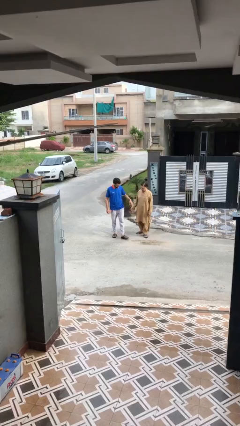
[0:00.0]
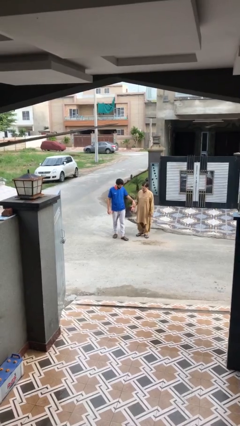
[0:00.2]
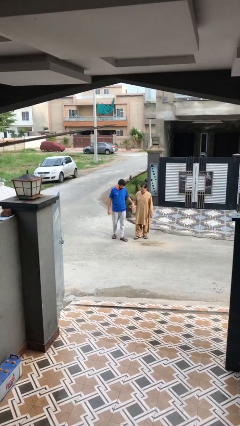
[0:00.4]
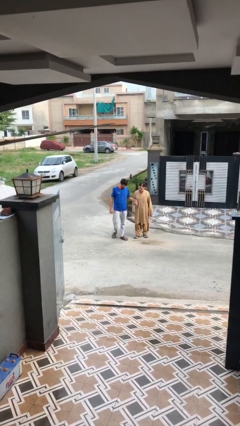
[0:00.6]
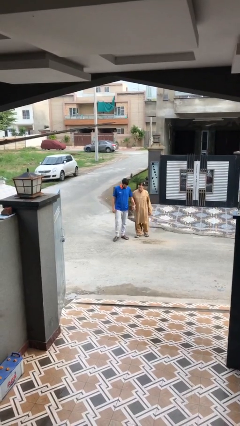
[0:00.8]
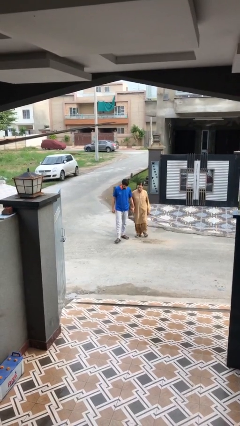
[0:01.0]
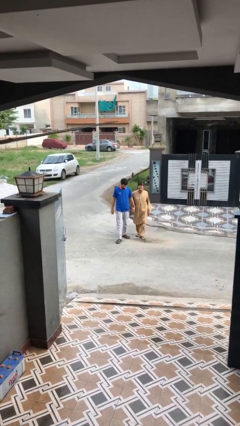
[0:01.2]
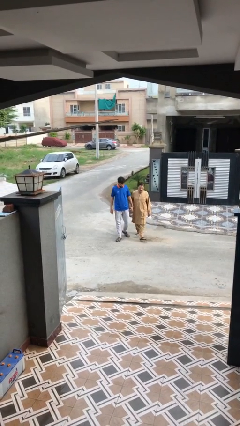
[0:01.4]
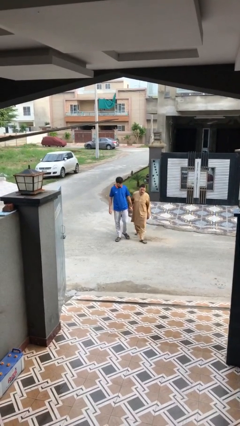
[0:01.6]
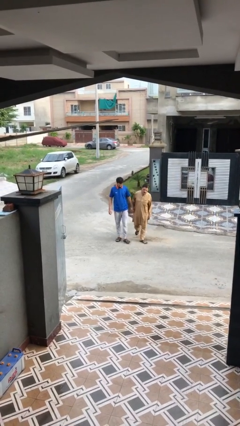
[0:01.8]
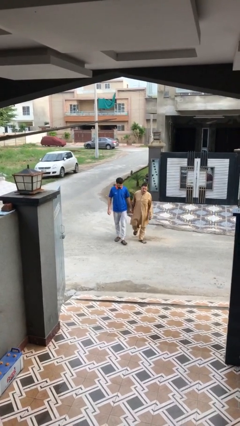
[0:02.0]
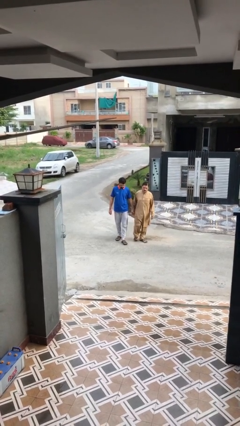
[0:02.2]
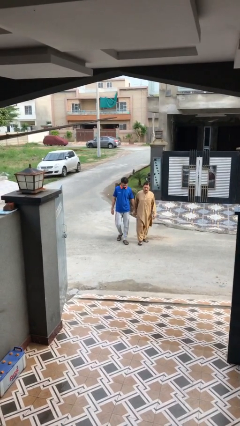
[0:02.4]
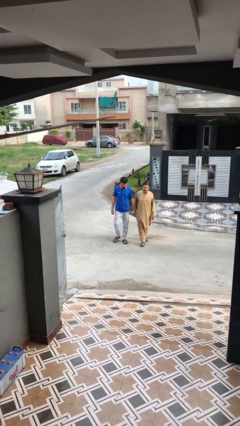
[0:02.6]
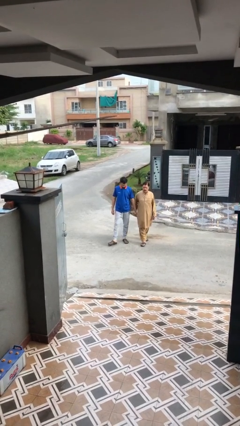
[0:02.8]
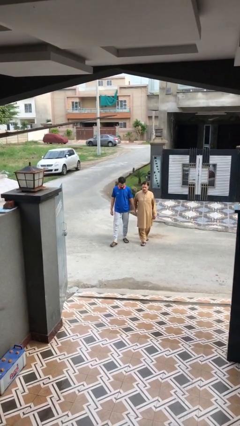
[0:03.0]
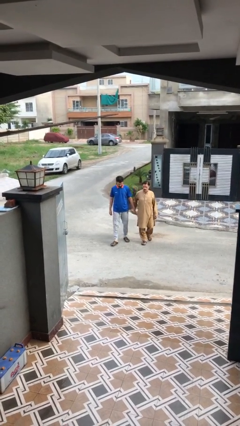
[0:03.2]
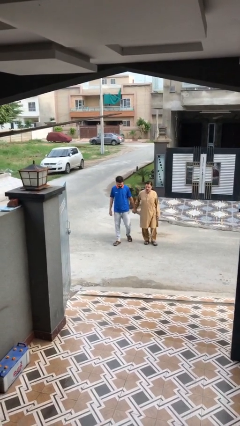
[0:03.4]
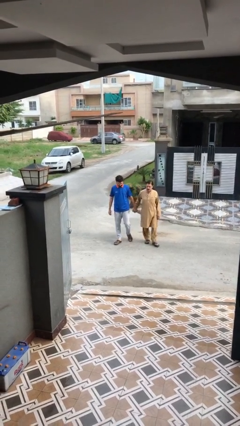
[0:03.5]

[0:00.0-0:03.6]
person holds hand

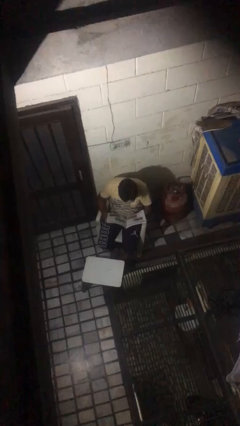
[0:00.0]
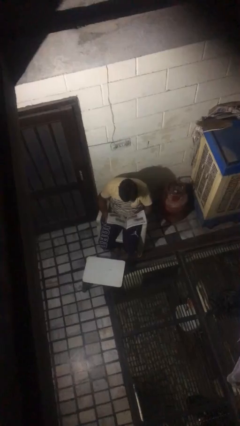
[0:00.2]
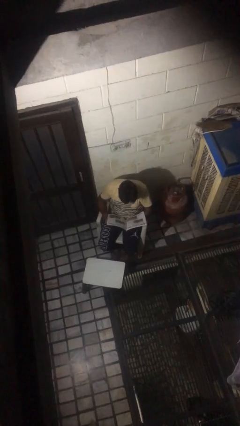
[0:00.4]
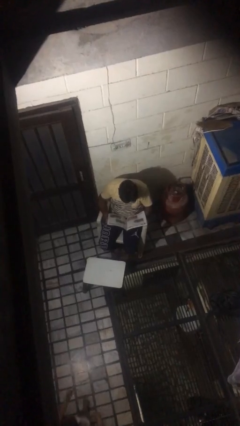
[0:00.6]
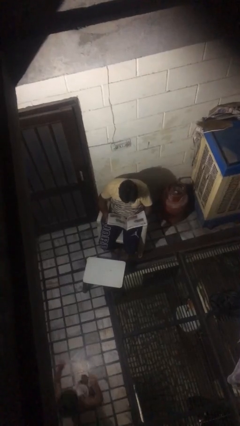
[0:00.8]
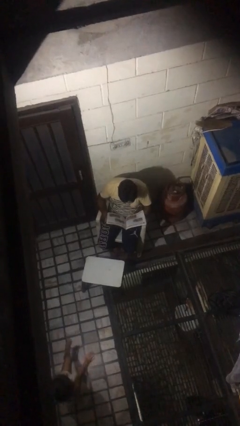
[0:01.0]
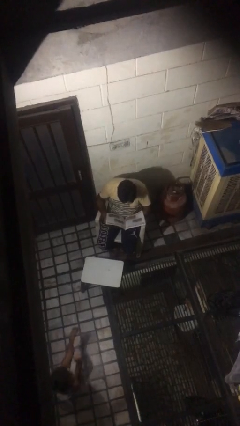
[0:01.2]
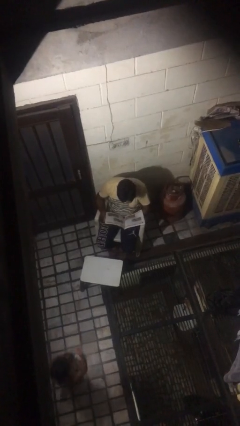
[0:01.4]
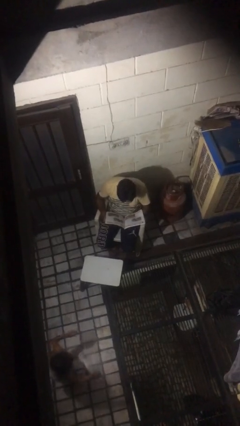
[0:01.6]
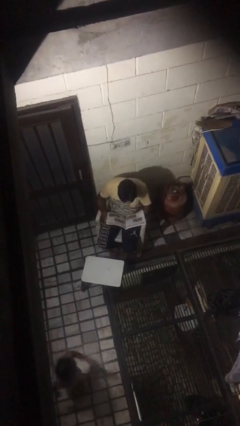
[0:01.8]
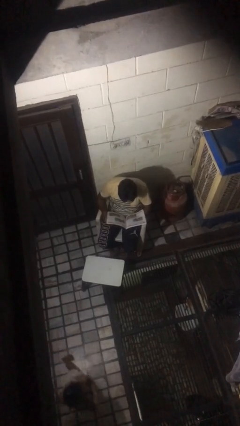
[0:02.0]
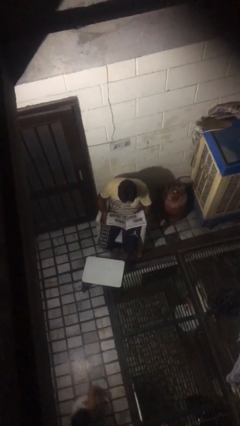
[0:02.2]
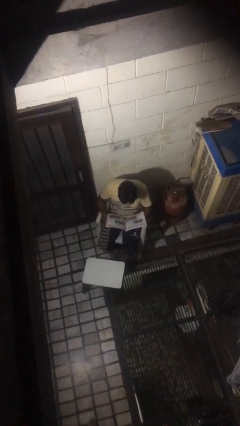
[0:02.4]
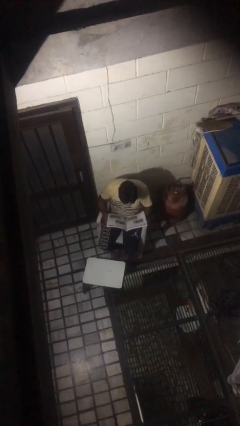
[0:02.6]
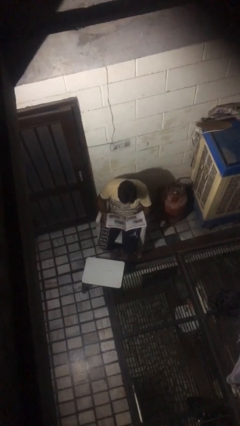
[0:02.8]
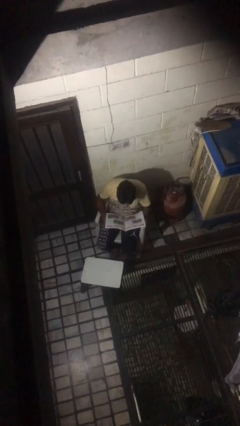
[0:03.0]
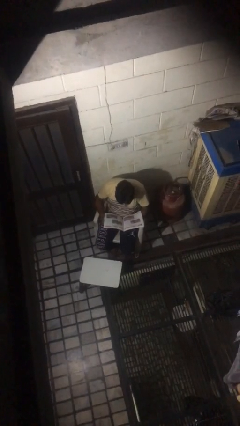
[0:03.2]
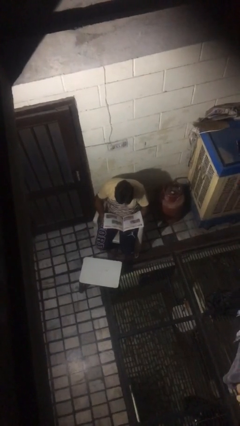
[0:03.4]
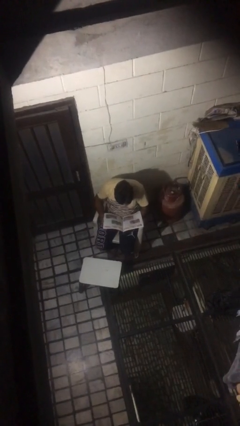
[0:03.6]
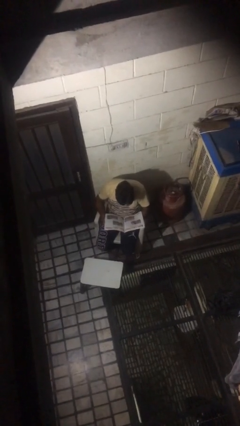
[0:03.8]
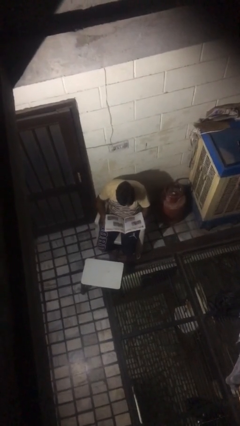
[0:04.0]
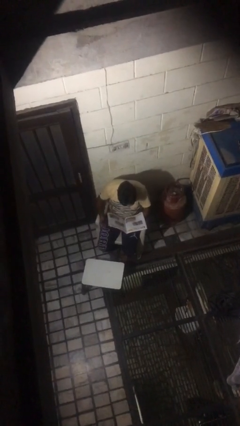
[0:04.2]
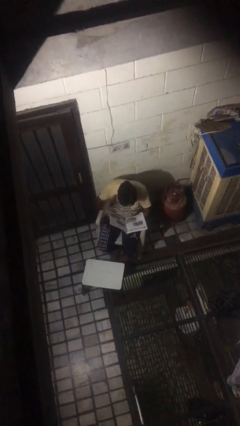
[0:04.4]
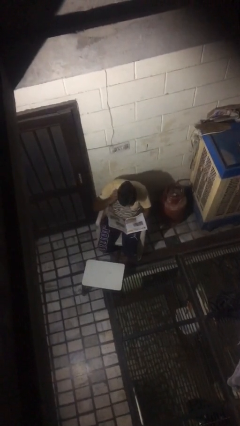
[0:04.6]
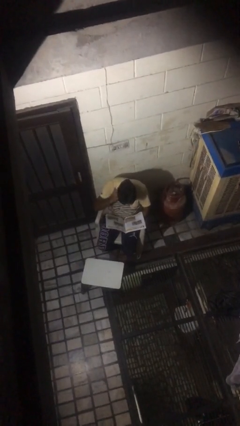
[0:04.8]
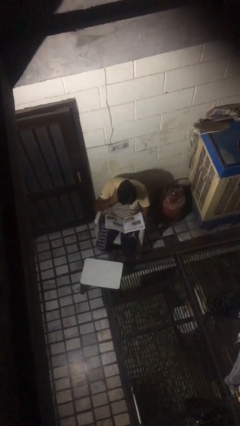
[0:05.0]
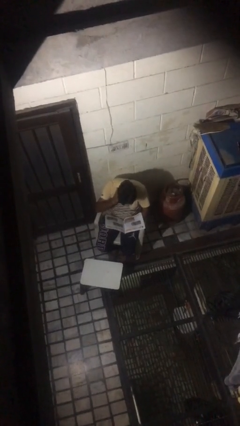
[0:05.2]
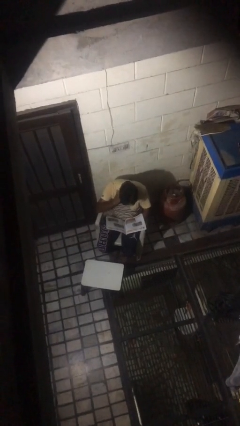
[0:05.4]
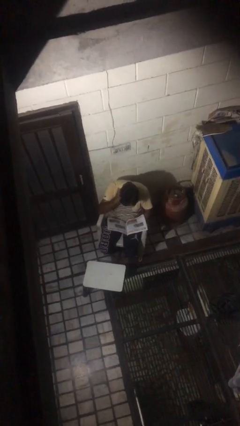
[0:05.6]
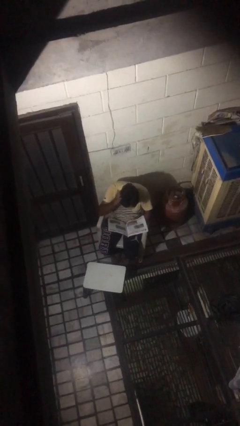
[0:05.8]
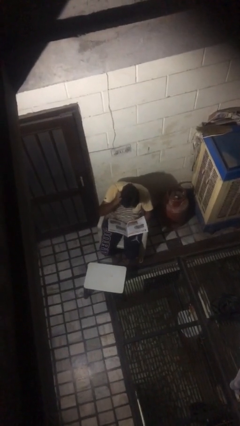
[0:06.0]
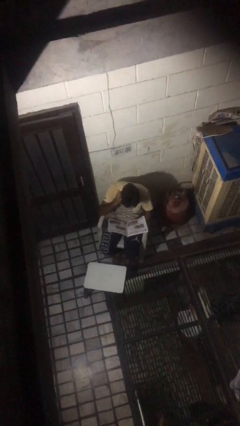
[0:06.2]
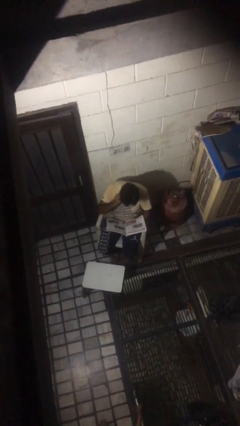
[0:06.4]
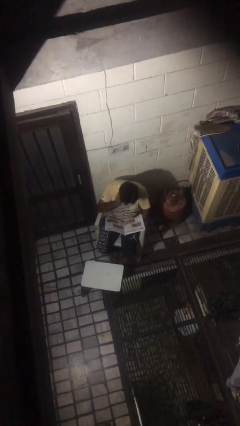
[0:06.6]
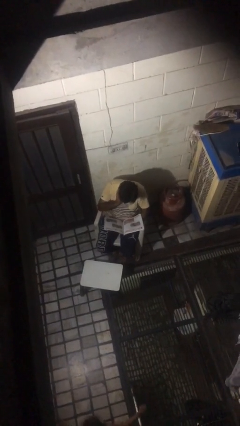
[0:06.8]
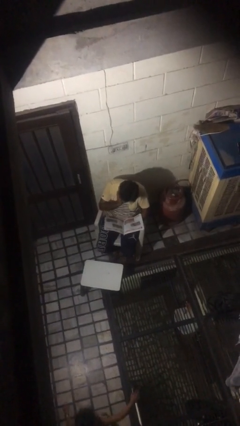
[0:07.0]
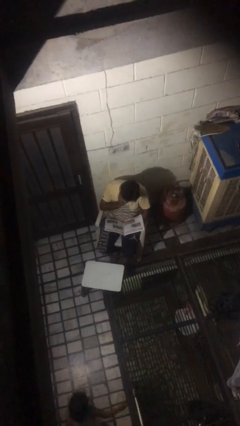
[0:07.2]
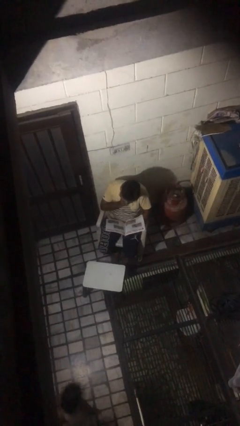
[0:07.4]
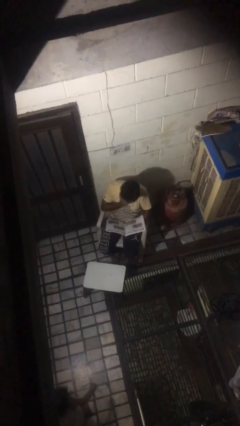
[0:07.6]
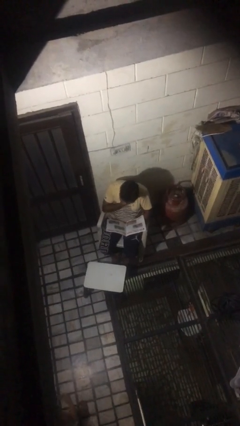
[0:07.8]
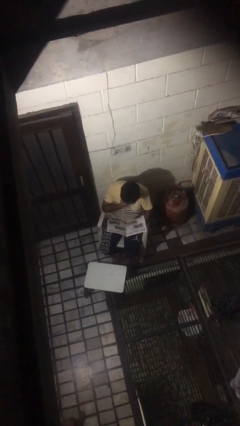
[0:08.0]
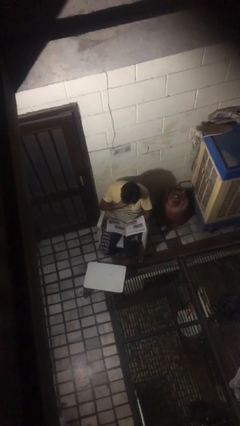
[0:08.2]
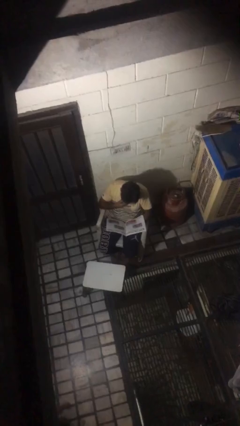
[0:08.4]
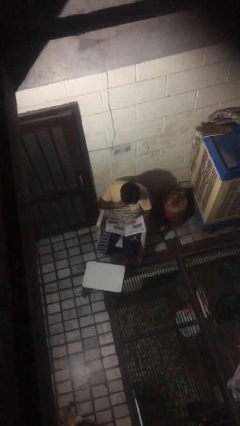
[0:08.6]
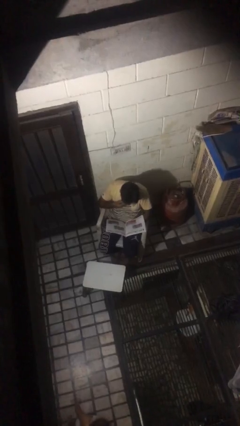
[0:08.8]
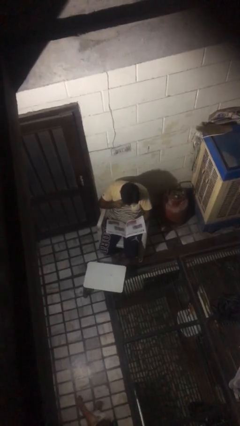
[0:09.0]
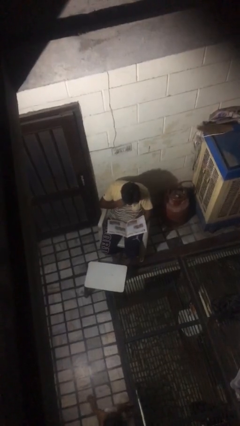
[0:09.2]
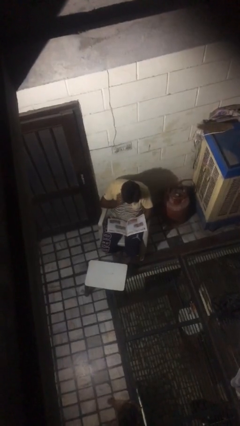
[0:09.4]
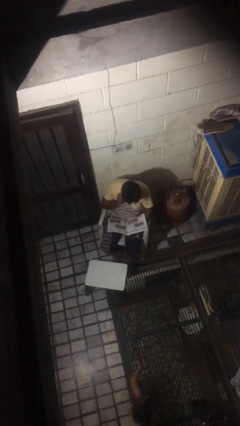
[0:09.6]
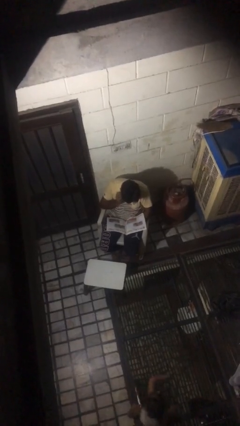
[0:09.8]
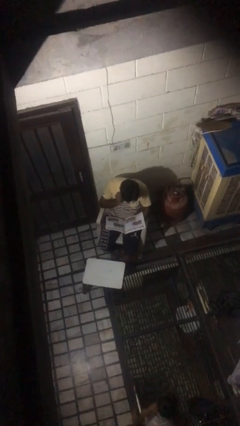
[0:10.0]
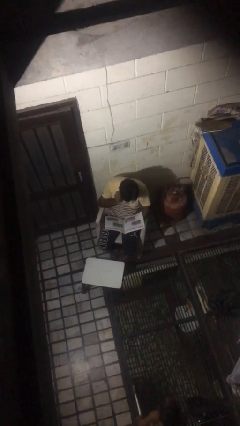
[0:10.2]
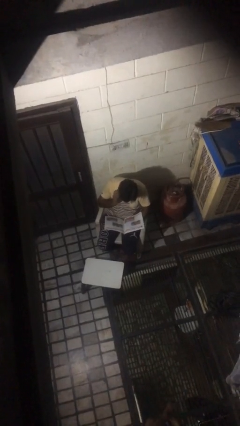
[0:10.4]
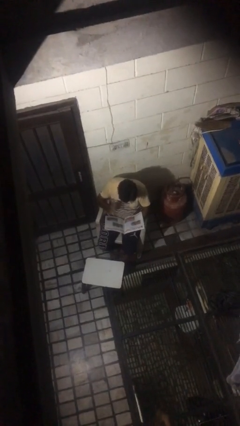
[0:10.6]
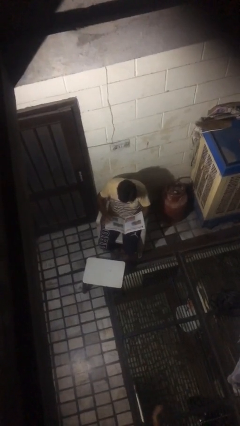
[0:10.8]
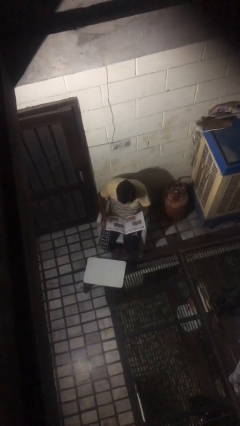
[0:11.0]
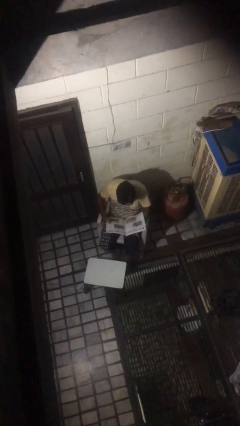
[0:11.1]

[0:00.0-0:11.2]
person reads document

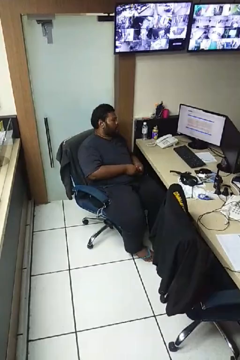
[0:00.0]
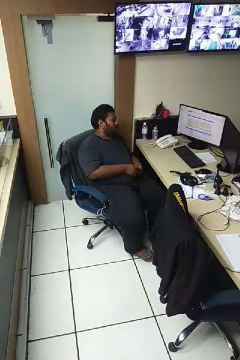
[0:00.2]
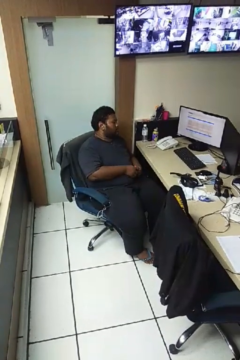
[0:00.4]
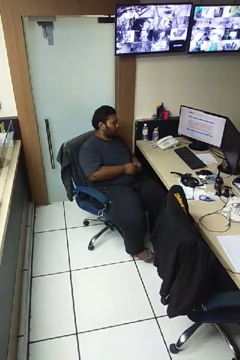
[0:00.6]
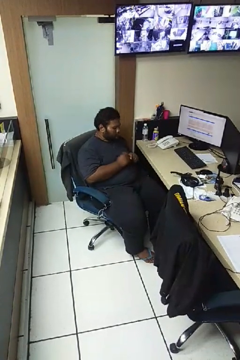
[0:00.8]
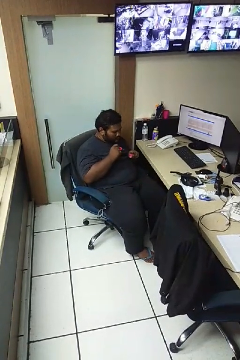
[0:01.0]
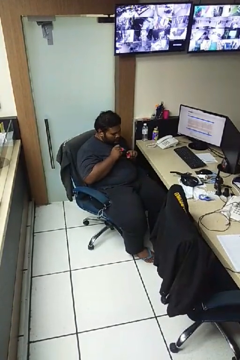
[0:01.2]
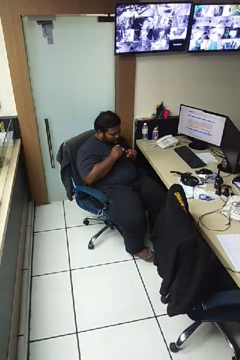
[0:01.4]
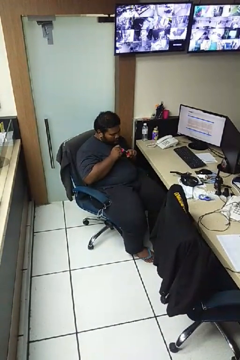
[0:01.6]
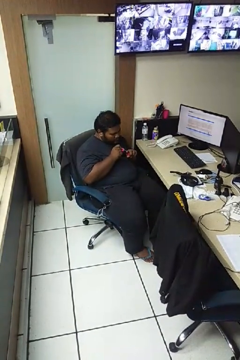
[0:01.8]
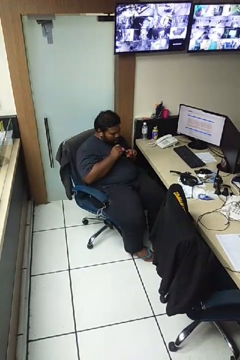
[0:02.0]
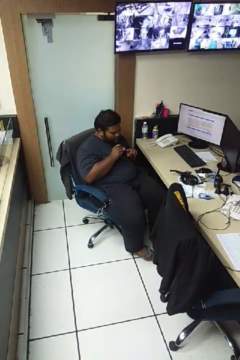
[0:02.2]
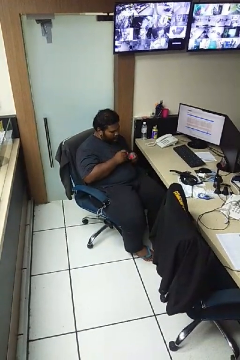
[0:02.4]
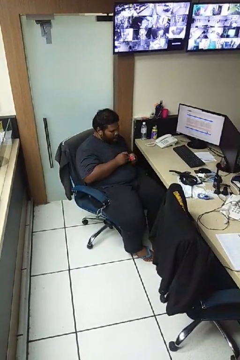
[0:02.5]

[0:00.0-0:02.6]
person paints fingernails

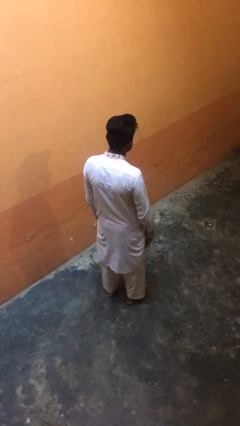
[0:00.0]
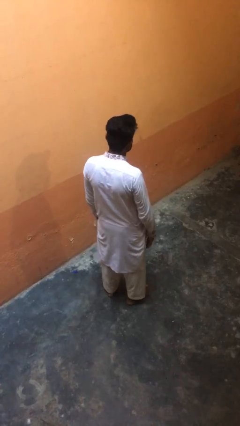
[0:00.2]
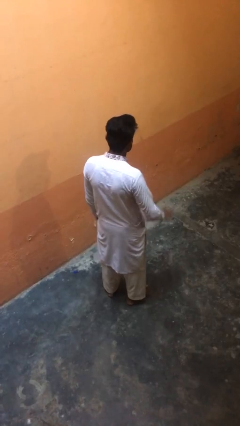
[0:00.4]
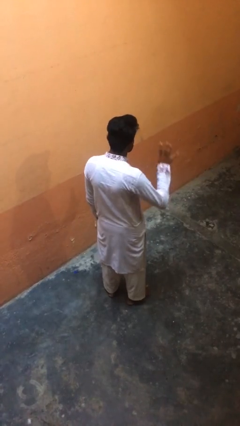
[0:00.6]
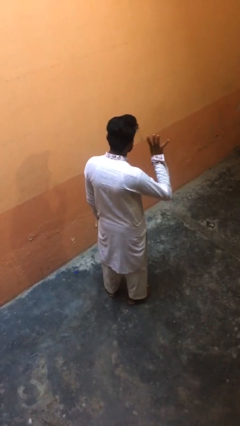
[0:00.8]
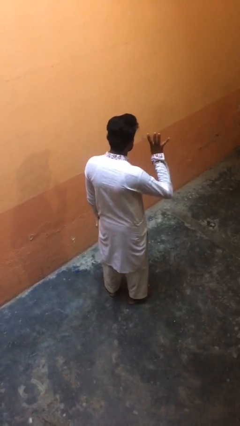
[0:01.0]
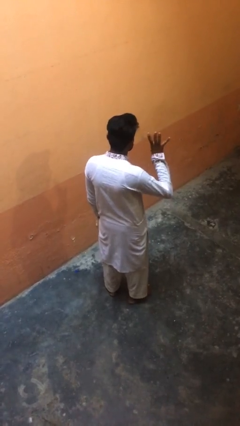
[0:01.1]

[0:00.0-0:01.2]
person gestures number four
